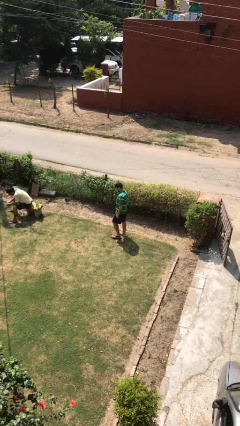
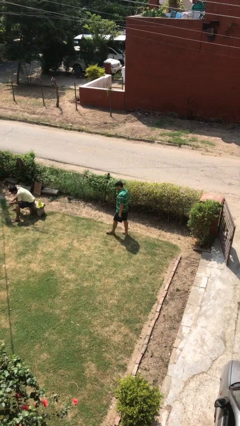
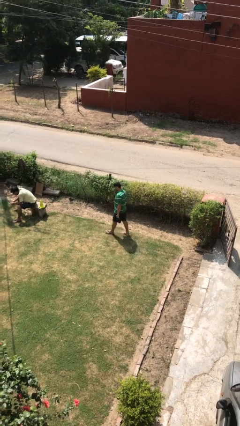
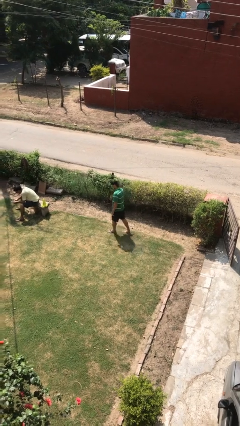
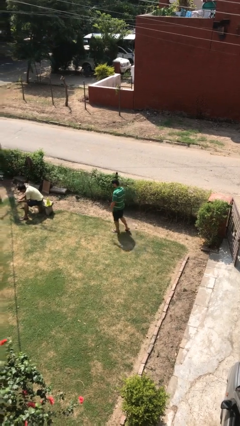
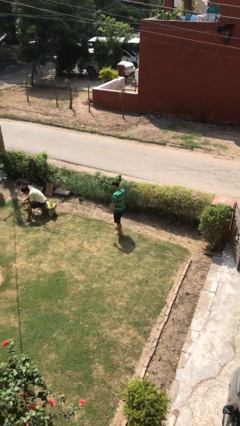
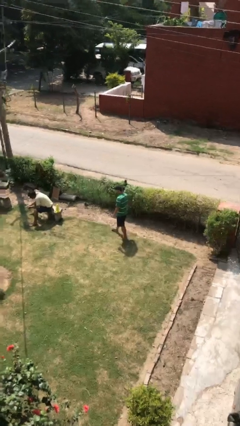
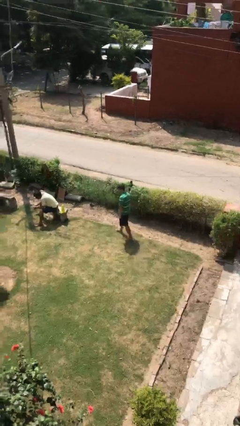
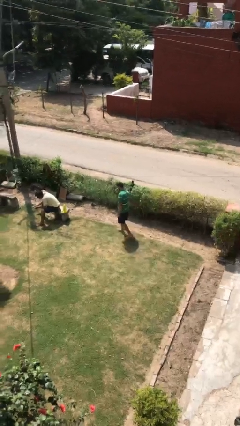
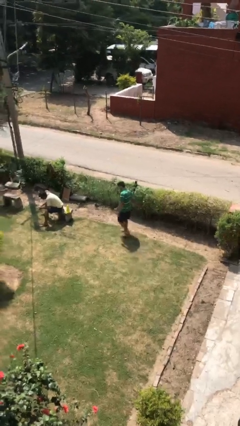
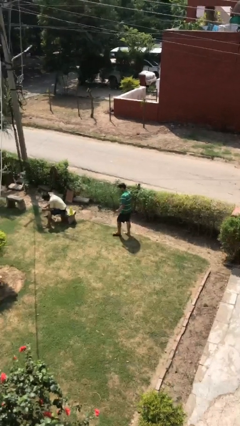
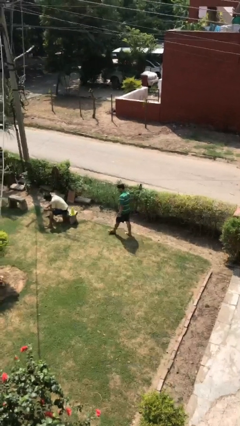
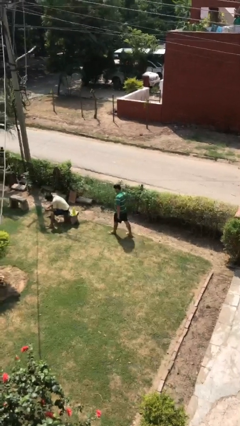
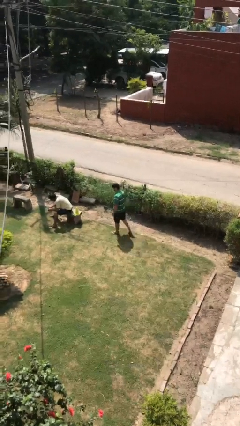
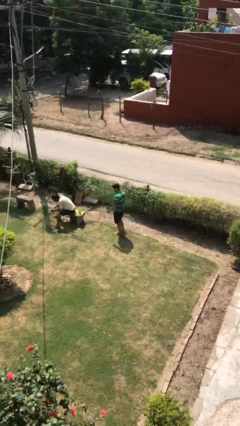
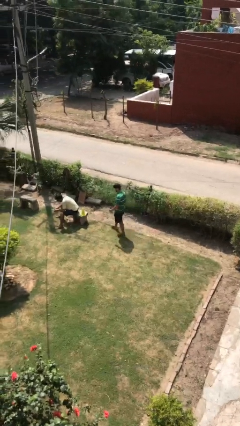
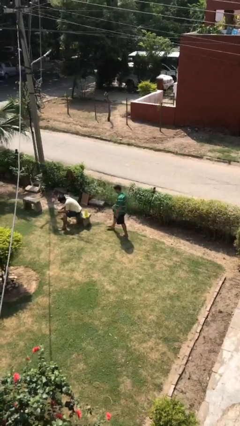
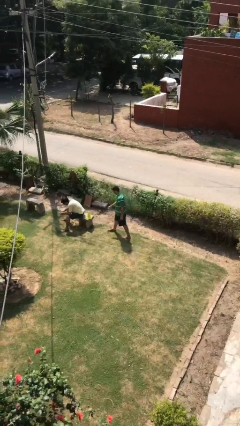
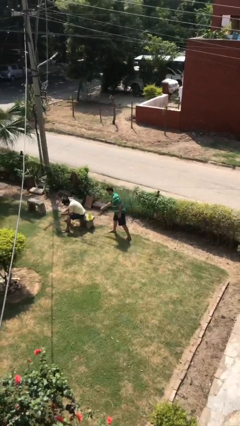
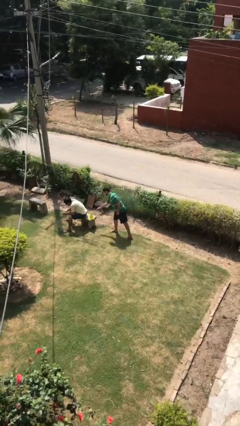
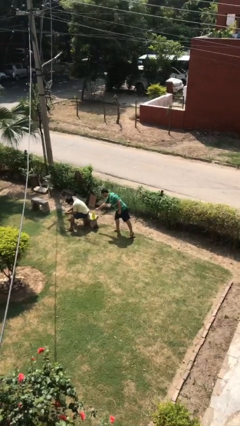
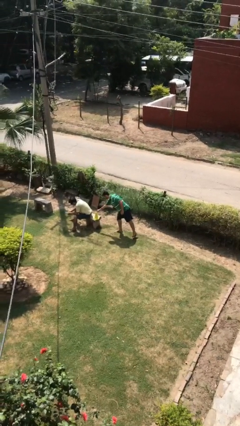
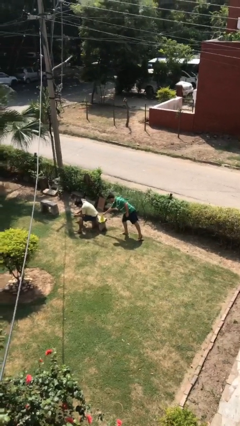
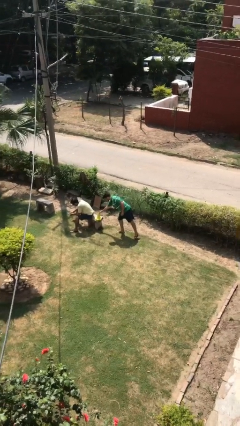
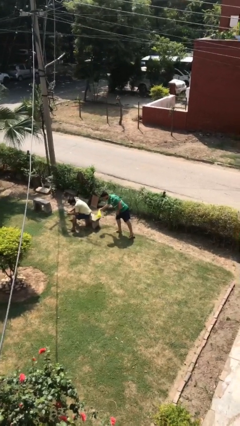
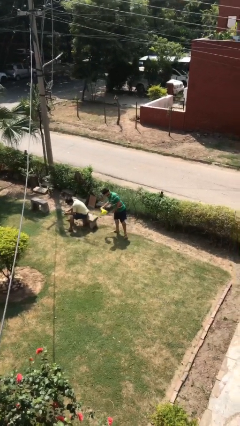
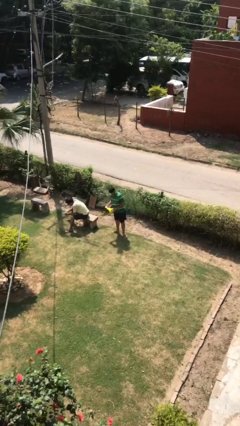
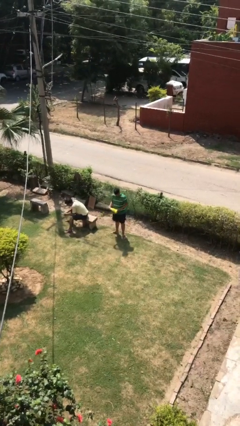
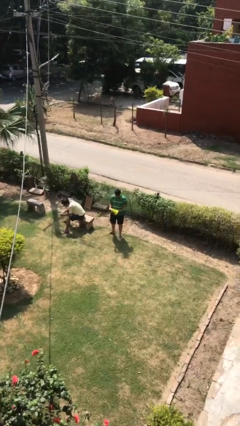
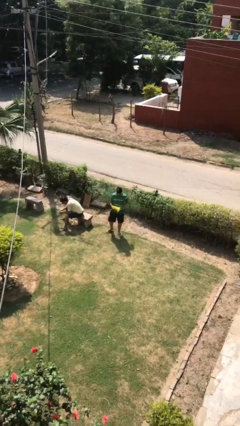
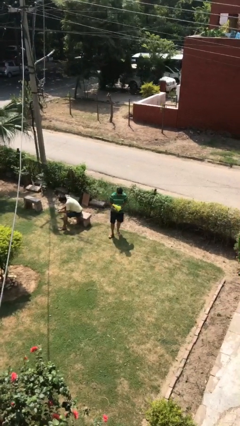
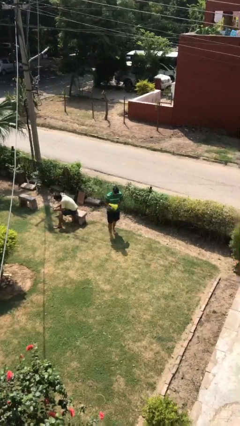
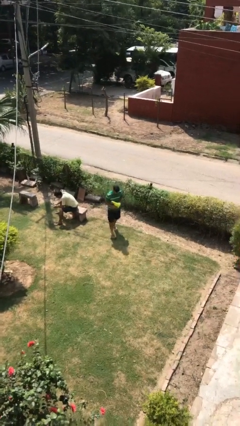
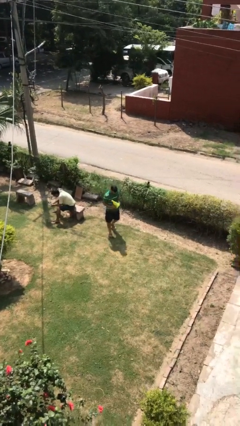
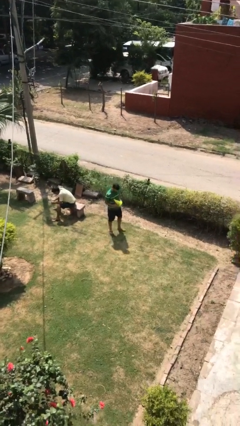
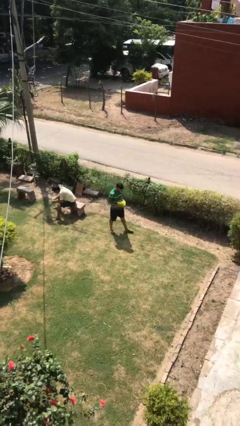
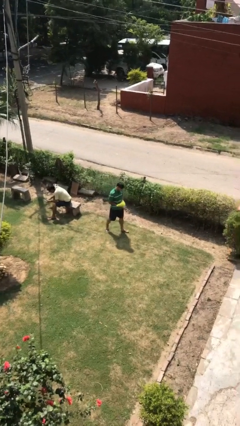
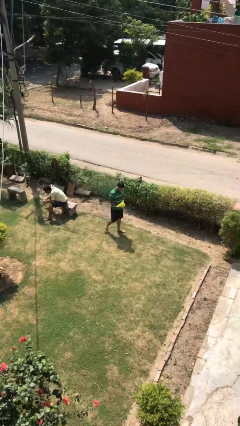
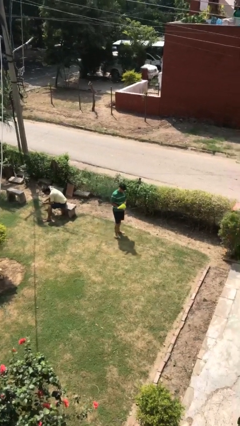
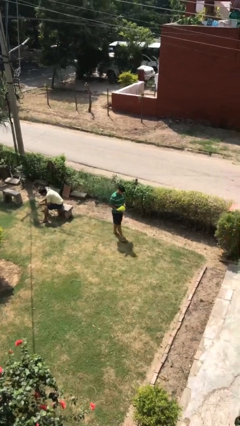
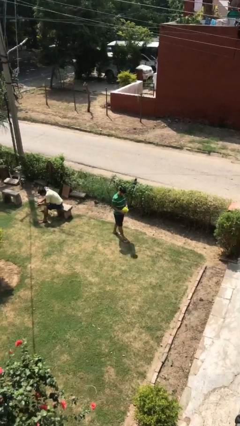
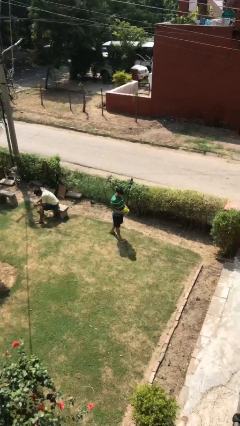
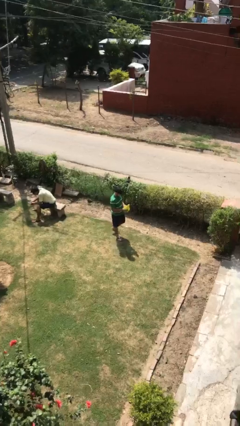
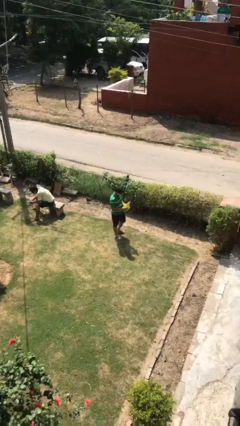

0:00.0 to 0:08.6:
person steals object from person

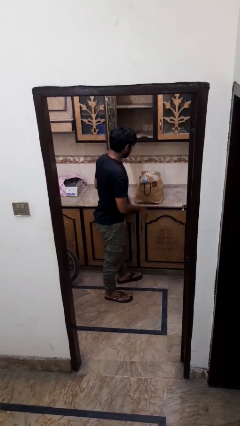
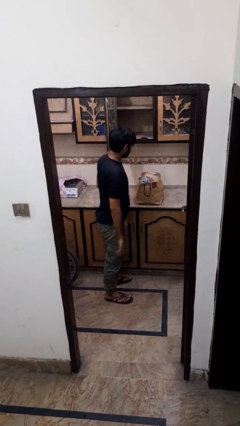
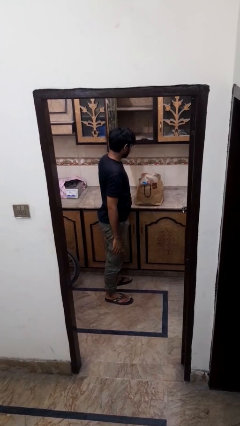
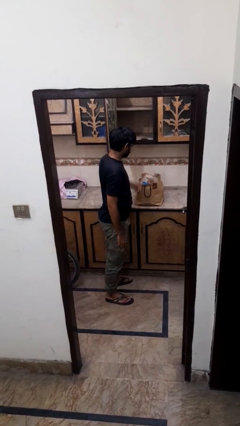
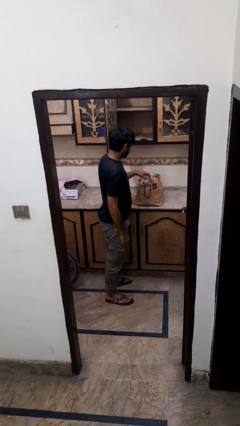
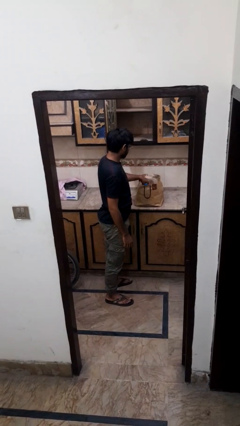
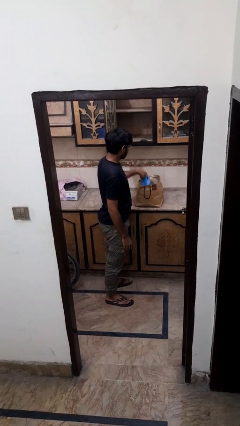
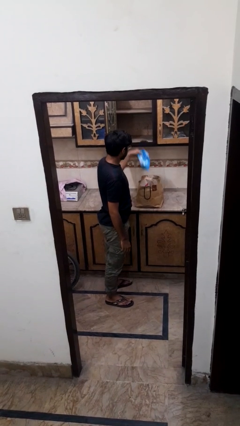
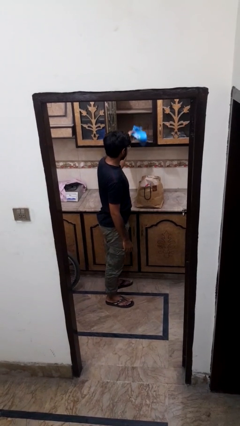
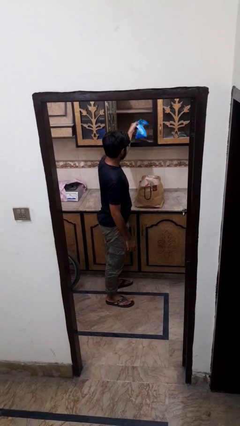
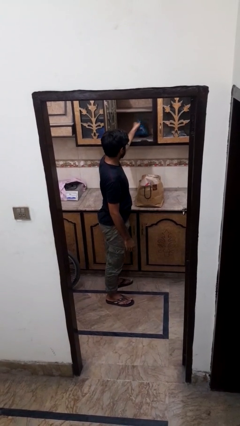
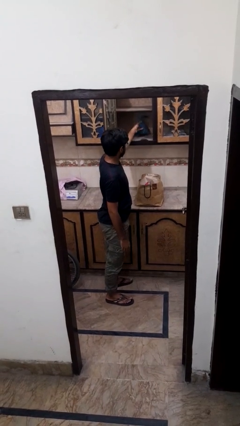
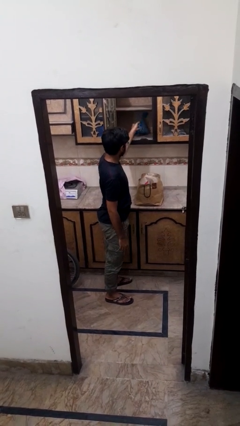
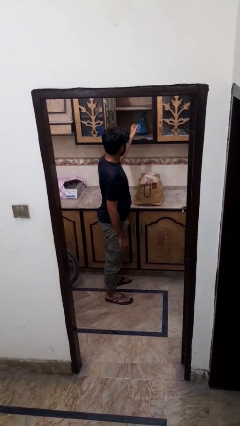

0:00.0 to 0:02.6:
person loads groceries into cabinet

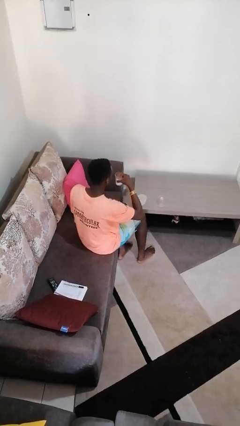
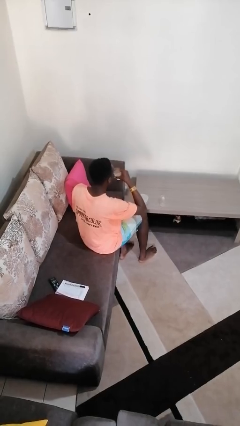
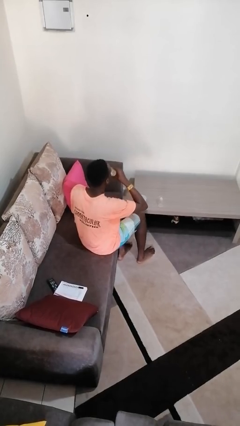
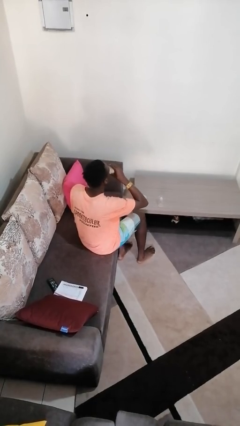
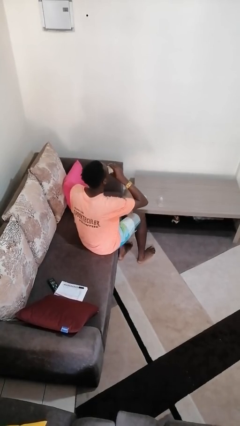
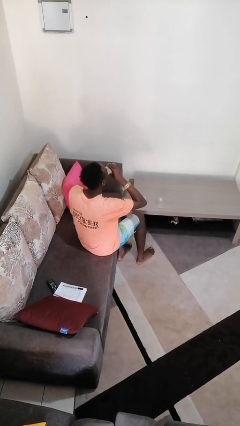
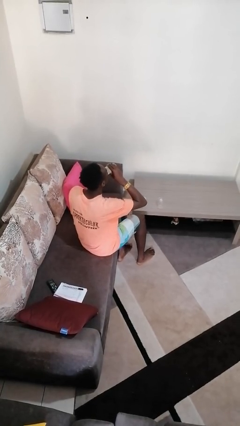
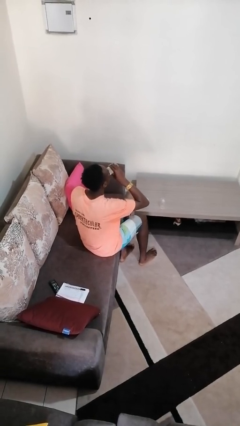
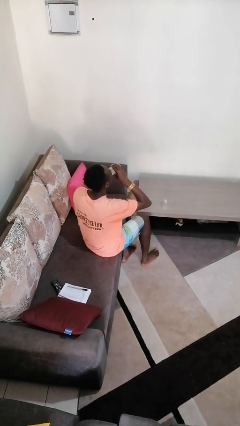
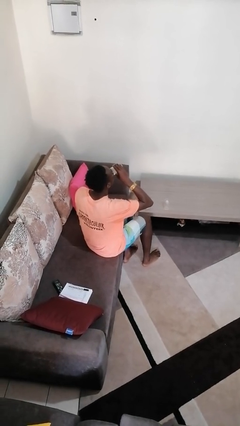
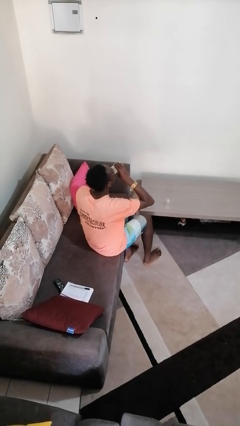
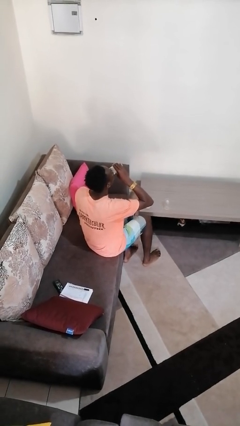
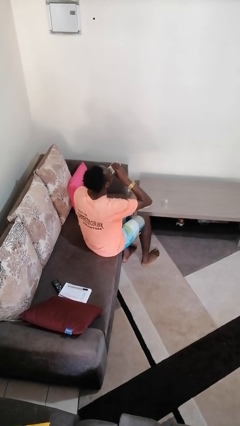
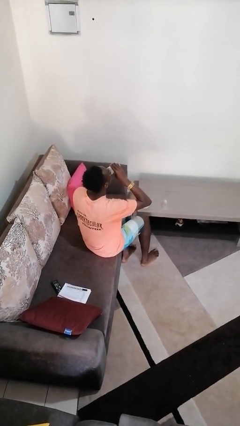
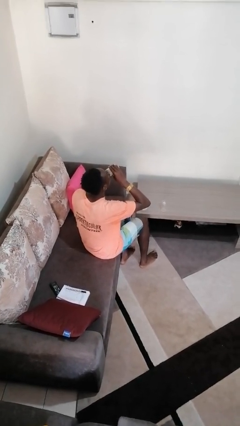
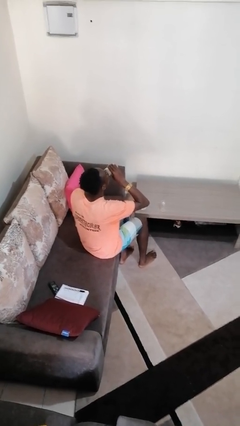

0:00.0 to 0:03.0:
person drinks from shotglass

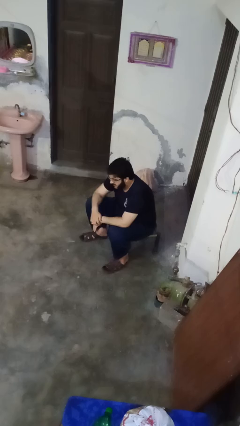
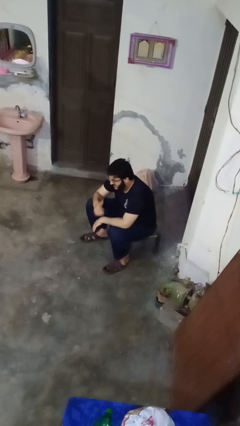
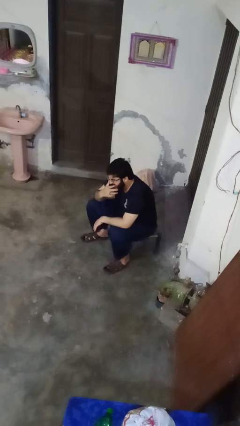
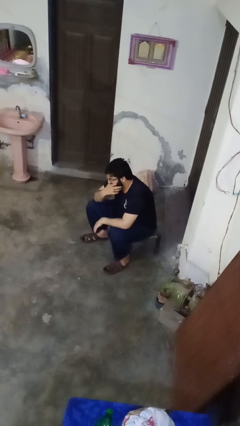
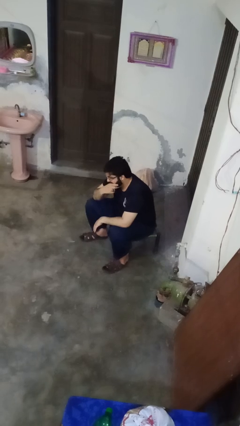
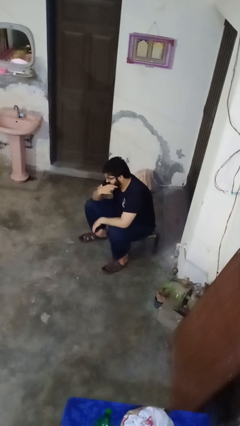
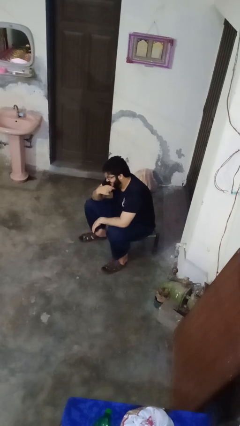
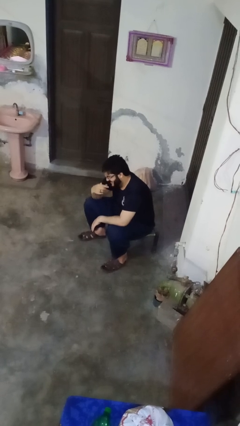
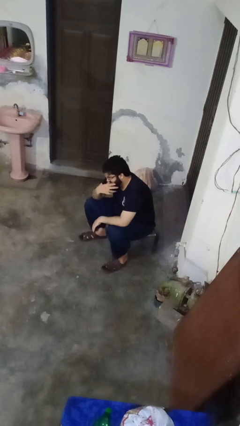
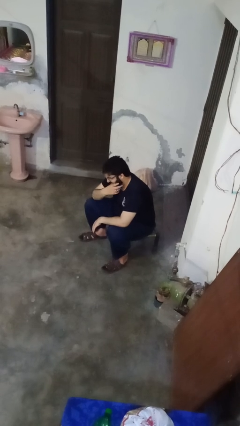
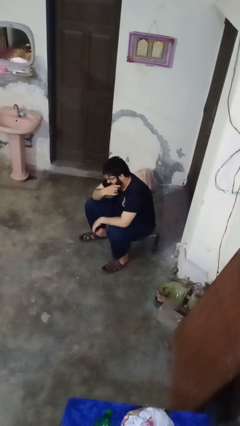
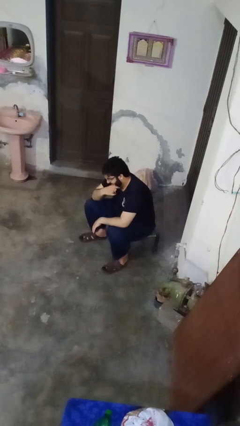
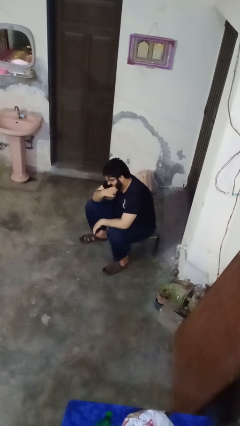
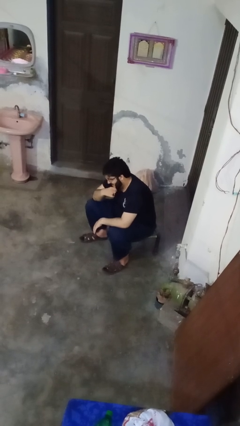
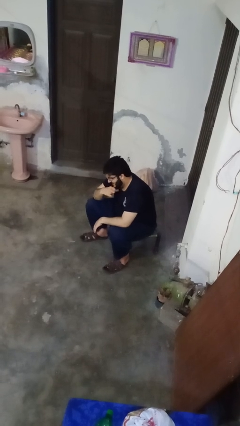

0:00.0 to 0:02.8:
person strokes chin

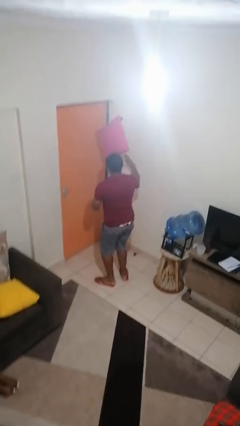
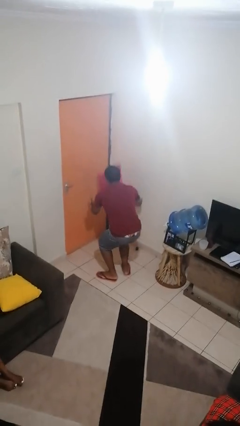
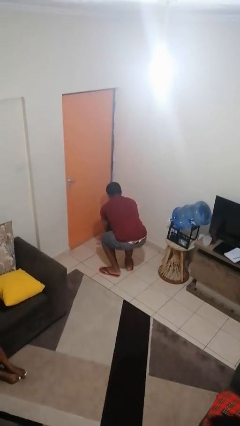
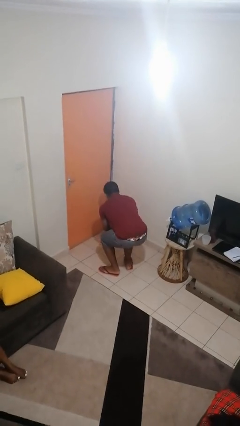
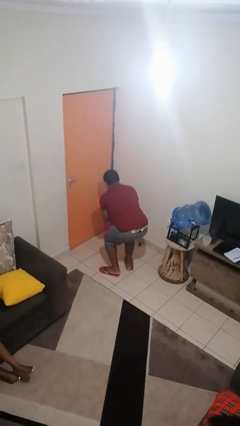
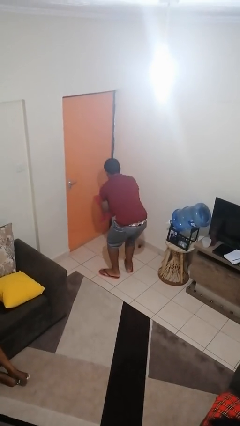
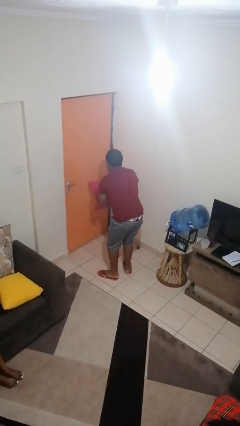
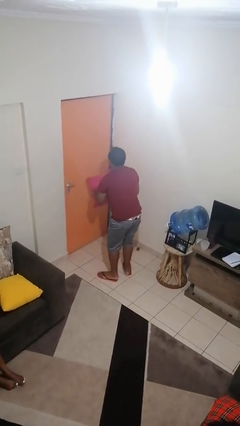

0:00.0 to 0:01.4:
person catches dropped object
